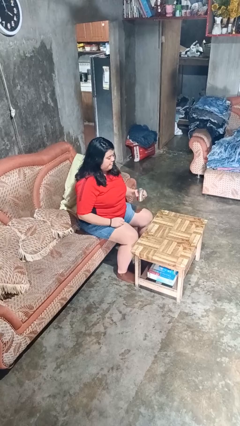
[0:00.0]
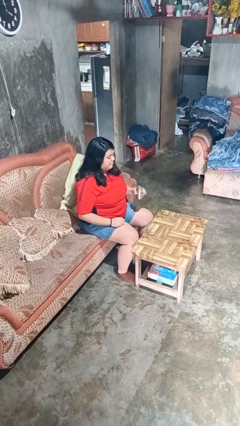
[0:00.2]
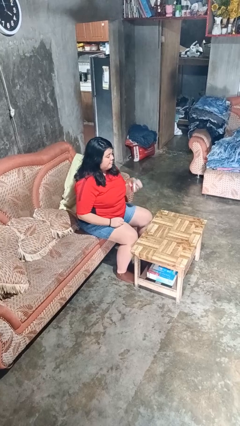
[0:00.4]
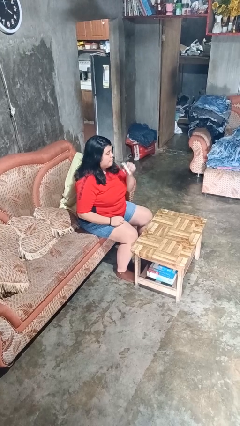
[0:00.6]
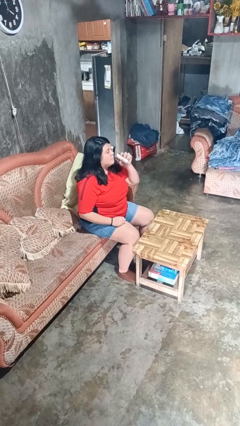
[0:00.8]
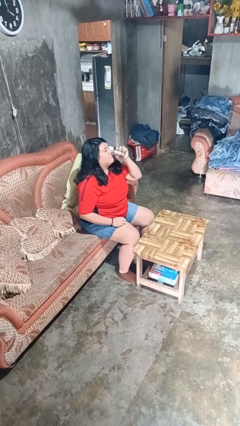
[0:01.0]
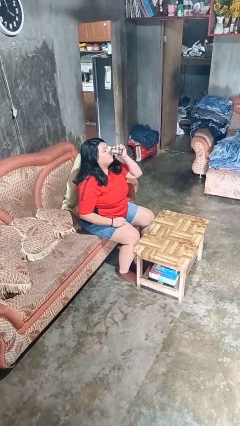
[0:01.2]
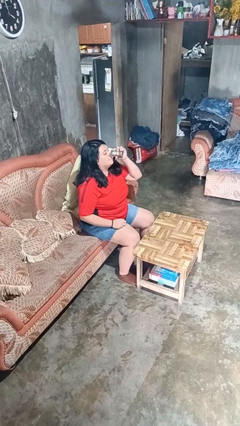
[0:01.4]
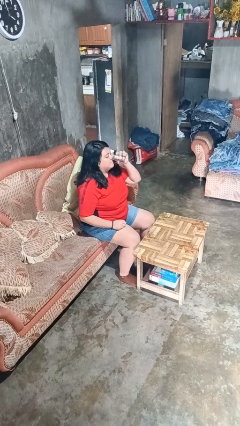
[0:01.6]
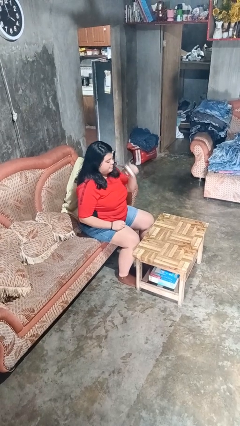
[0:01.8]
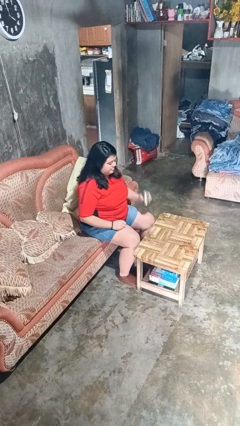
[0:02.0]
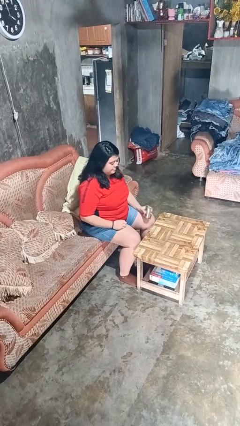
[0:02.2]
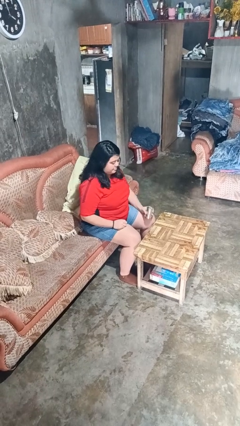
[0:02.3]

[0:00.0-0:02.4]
person drinks from beverage can

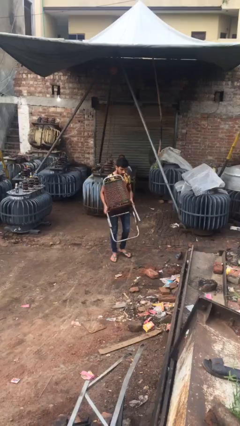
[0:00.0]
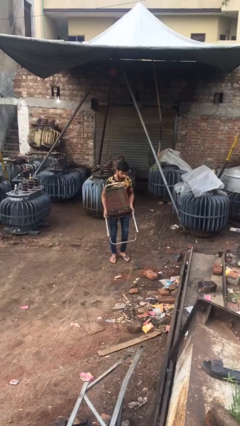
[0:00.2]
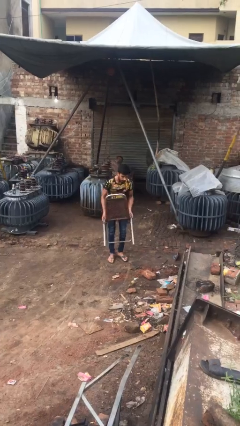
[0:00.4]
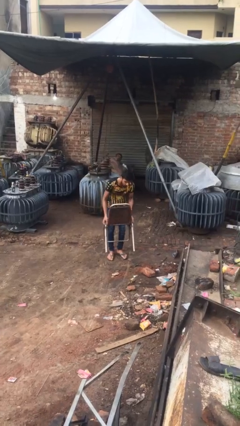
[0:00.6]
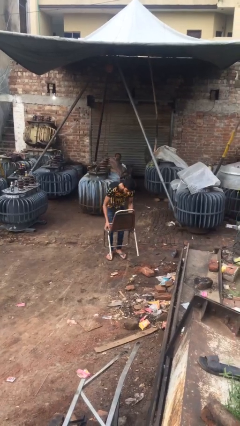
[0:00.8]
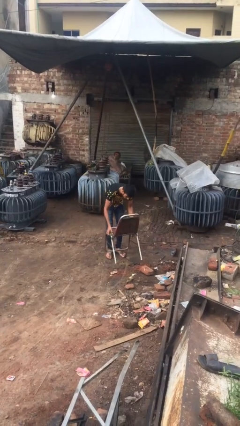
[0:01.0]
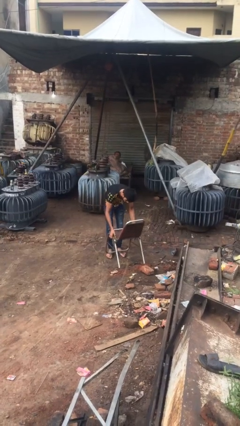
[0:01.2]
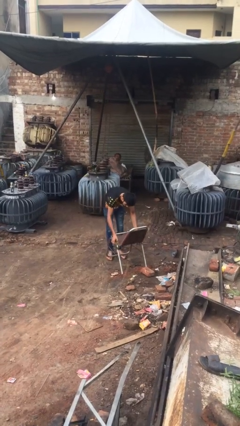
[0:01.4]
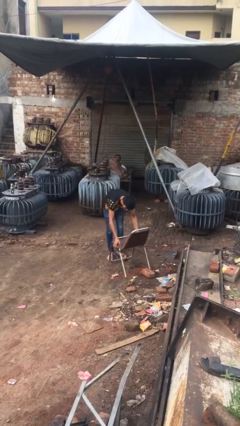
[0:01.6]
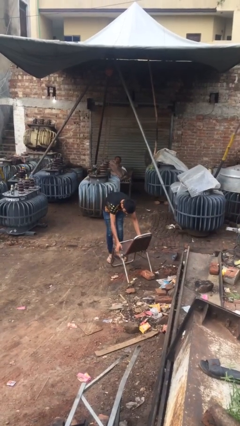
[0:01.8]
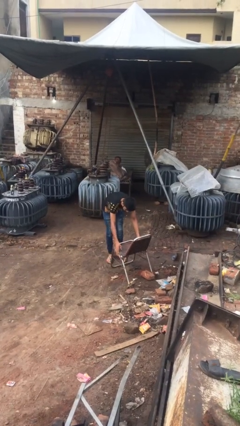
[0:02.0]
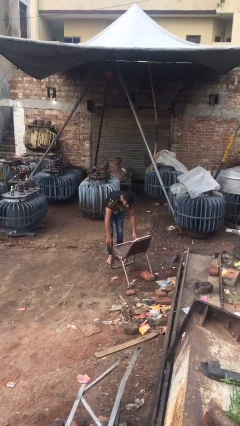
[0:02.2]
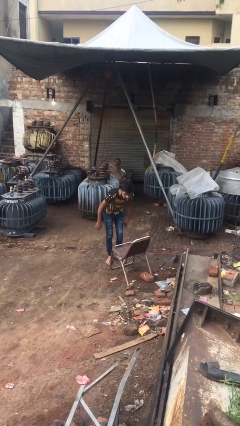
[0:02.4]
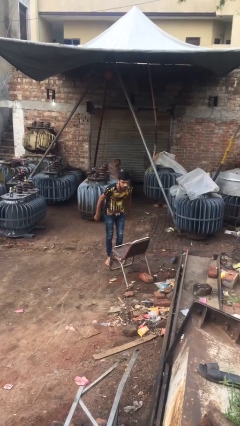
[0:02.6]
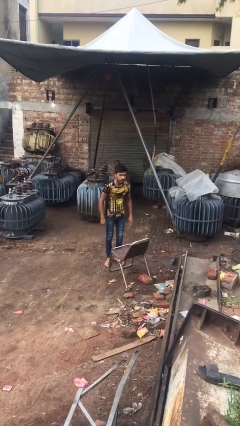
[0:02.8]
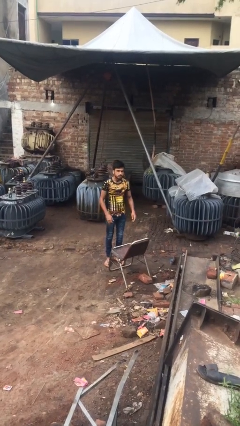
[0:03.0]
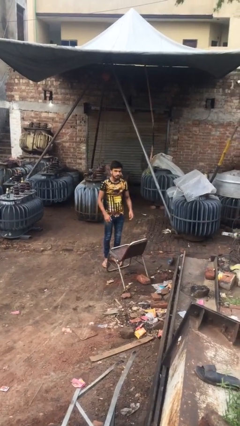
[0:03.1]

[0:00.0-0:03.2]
person puts down object on floor

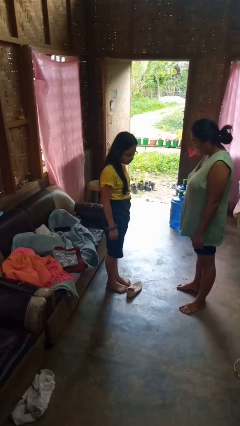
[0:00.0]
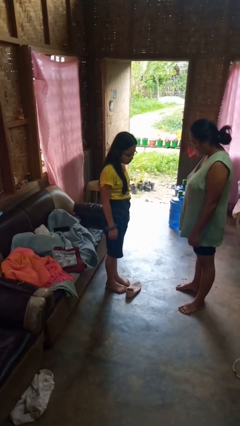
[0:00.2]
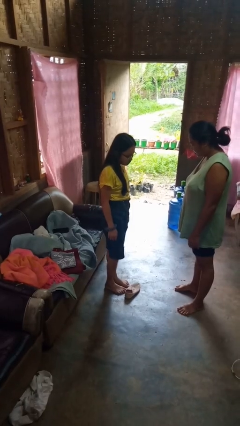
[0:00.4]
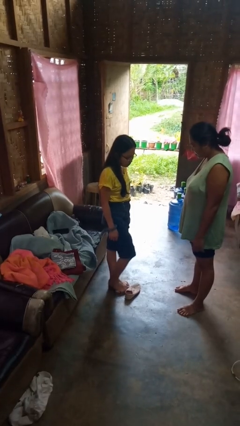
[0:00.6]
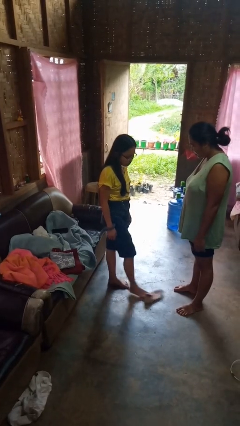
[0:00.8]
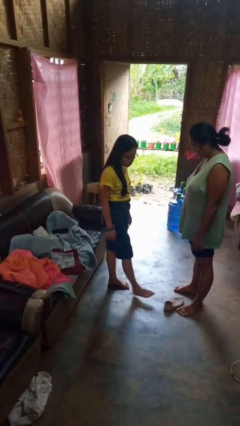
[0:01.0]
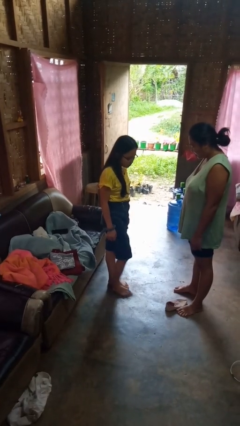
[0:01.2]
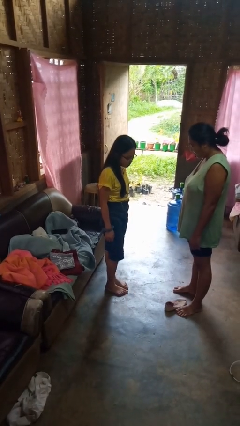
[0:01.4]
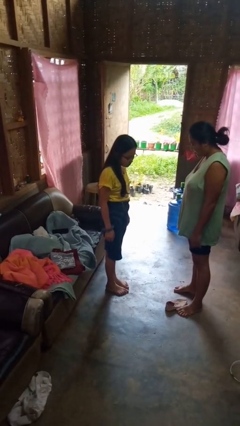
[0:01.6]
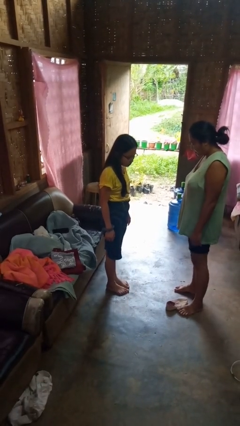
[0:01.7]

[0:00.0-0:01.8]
person kicks object to person

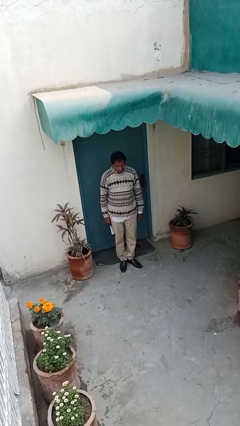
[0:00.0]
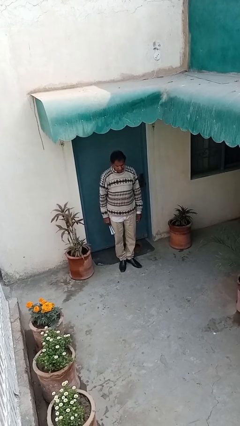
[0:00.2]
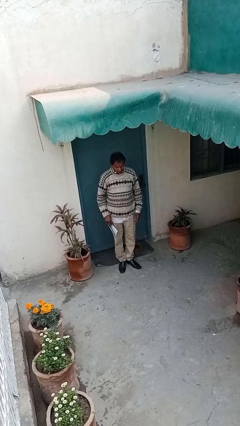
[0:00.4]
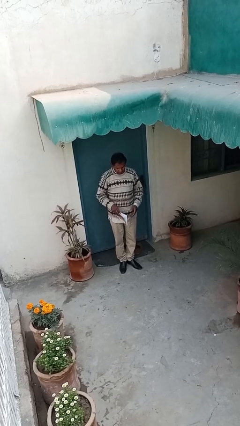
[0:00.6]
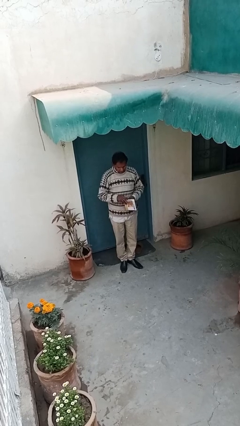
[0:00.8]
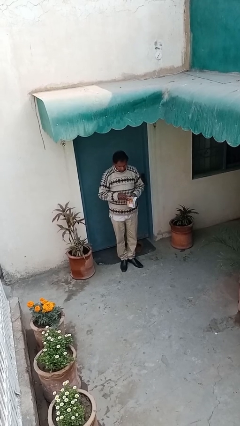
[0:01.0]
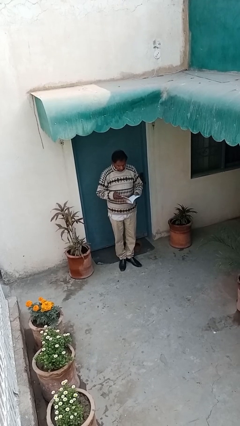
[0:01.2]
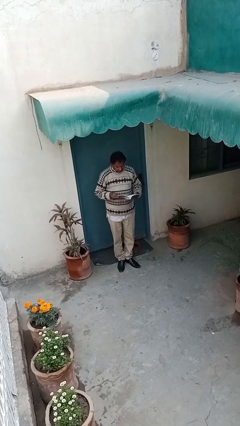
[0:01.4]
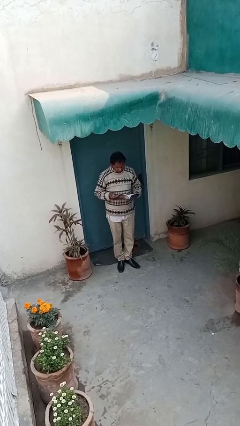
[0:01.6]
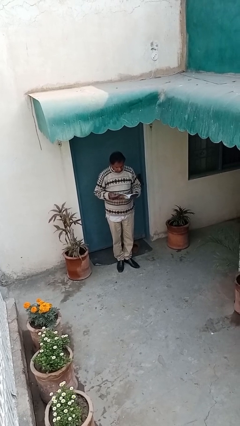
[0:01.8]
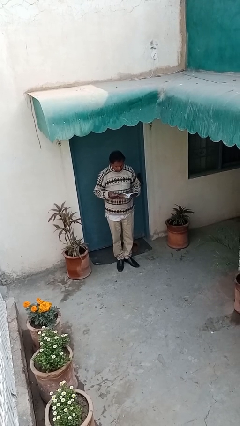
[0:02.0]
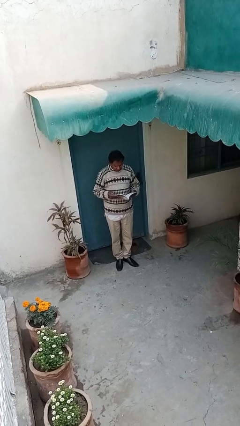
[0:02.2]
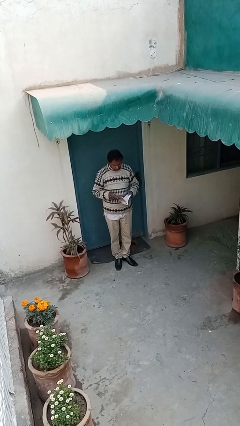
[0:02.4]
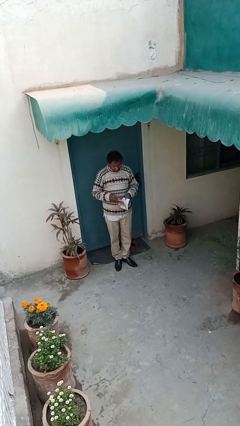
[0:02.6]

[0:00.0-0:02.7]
person reads document

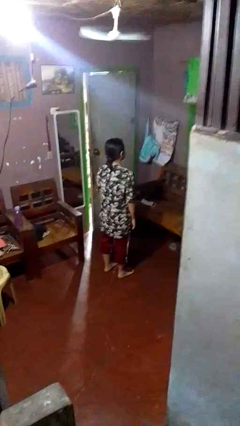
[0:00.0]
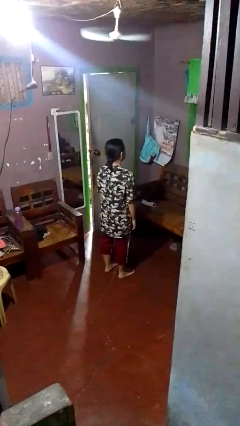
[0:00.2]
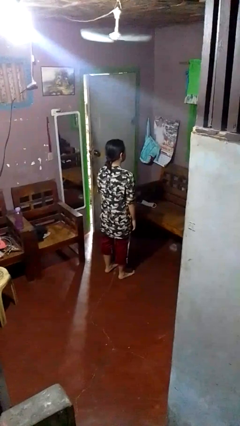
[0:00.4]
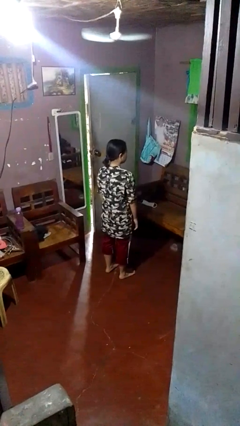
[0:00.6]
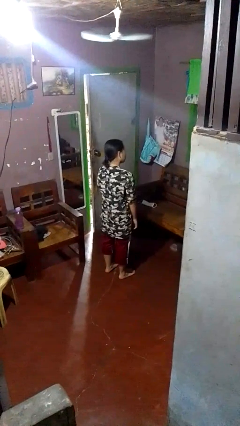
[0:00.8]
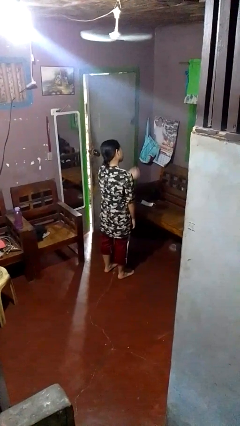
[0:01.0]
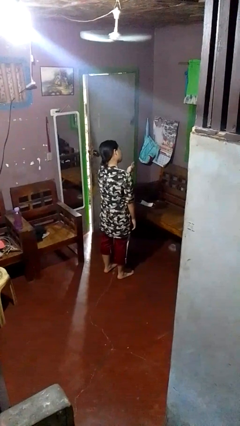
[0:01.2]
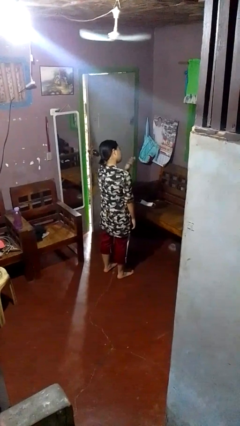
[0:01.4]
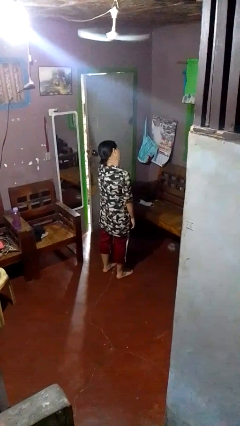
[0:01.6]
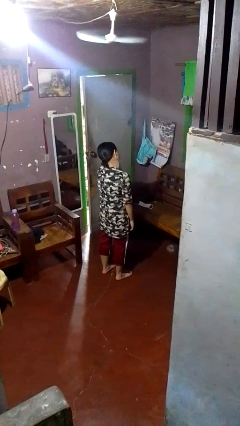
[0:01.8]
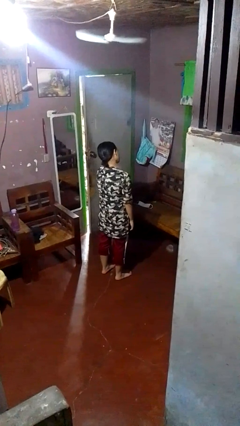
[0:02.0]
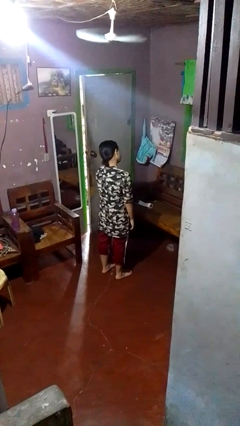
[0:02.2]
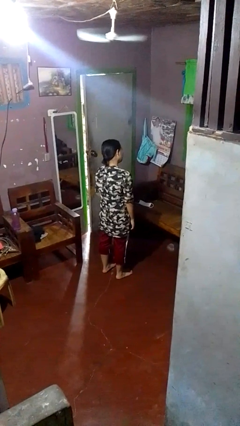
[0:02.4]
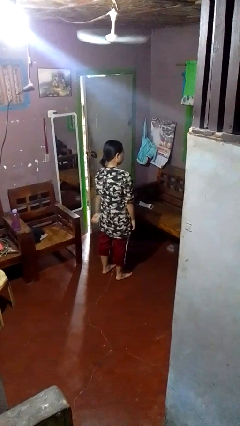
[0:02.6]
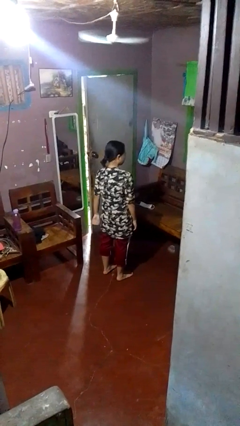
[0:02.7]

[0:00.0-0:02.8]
person swats bug

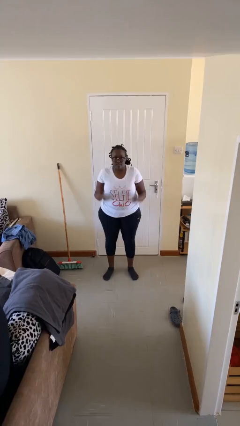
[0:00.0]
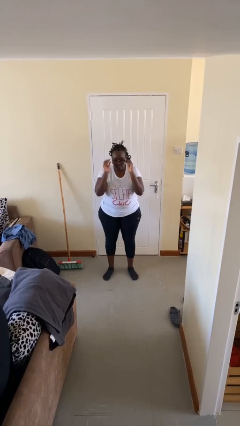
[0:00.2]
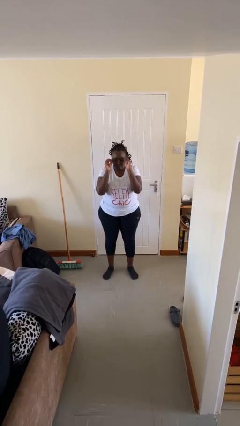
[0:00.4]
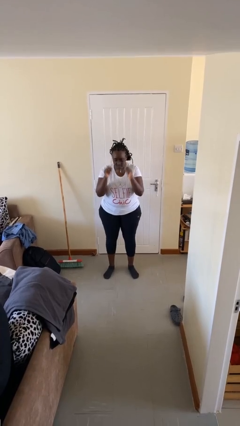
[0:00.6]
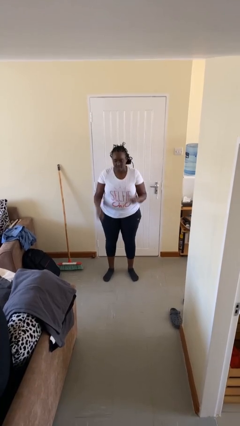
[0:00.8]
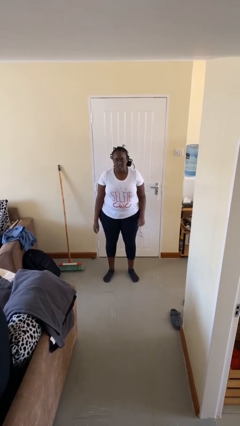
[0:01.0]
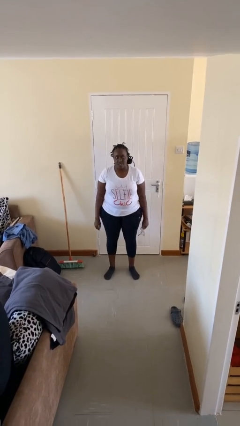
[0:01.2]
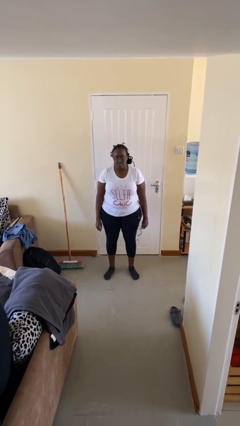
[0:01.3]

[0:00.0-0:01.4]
person takes off glasses

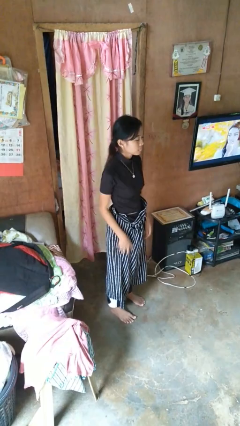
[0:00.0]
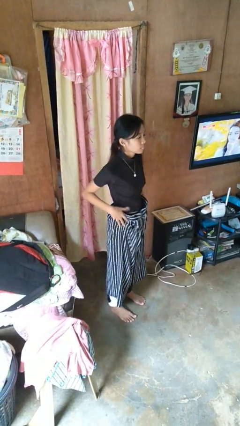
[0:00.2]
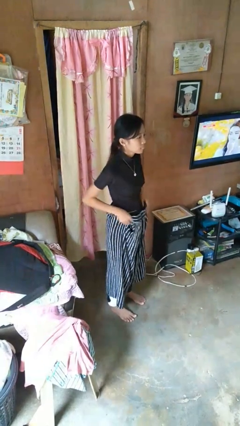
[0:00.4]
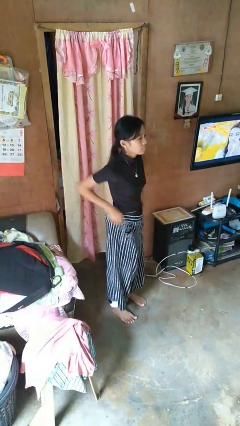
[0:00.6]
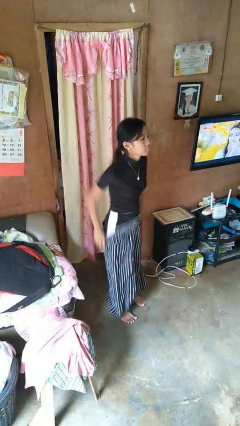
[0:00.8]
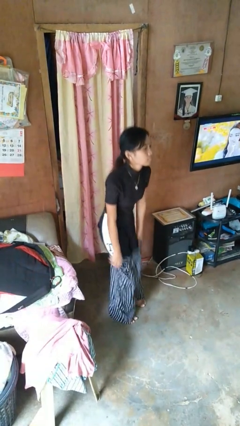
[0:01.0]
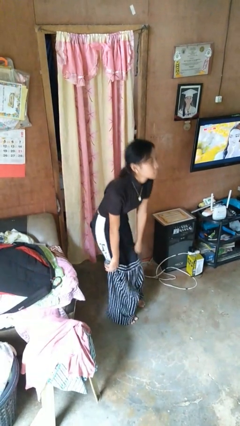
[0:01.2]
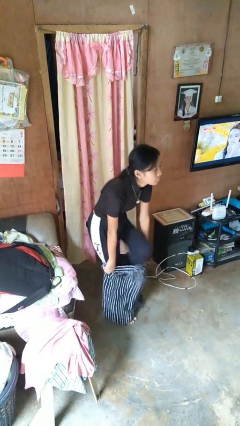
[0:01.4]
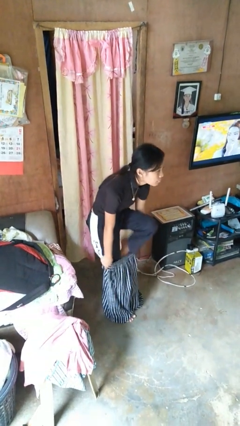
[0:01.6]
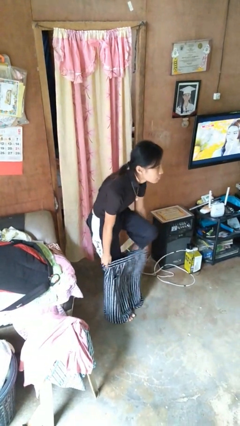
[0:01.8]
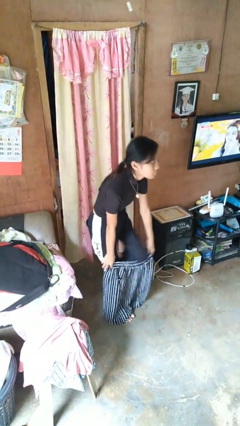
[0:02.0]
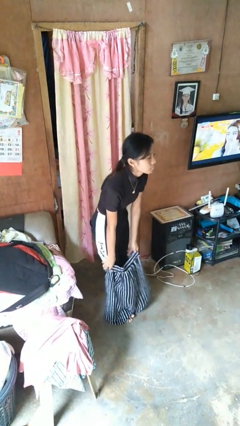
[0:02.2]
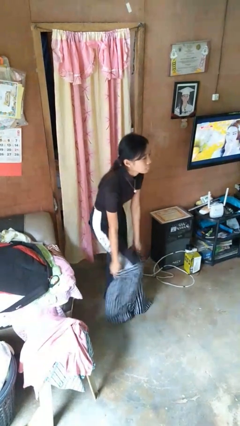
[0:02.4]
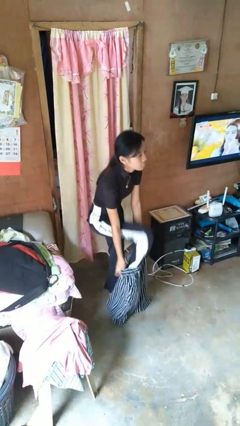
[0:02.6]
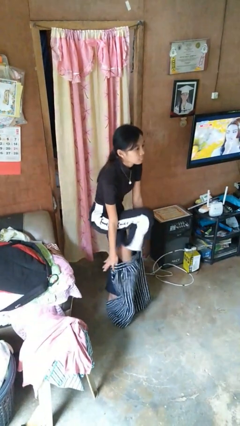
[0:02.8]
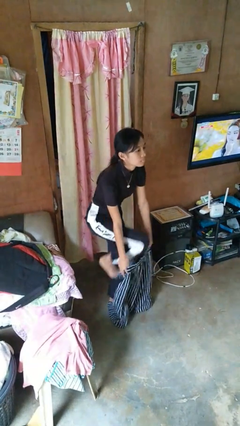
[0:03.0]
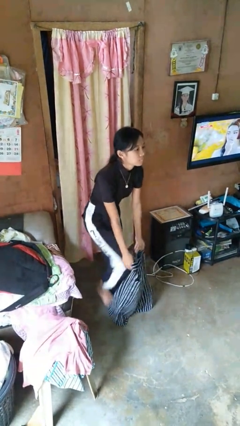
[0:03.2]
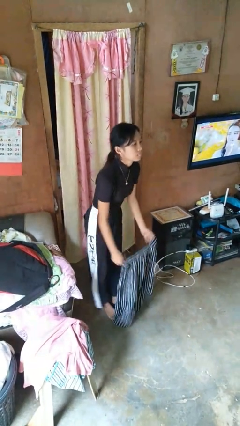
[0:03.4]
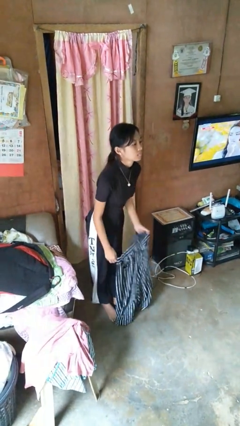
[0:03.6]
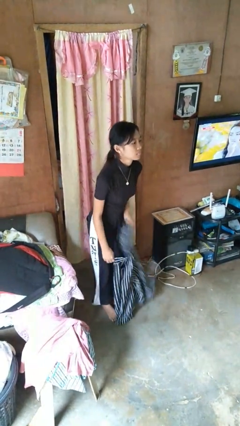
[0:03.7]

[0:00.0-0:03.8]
person takes off pants
